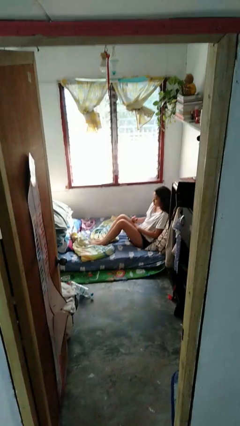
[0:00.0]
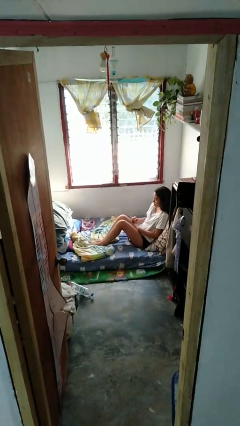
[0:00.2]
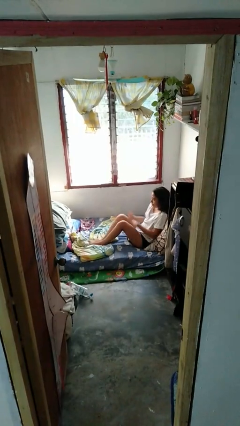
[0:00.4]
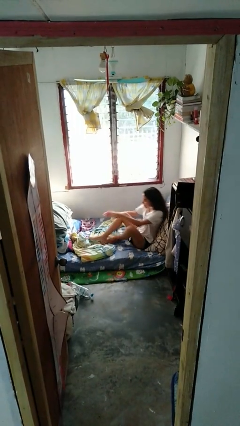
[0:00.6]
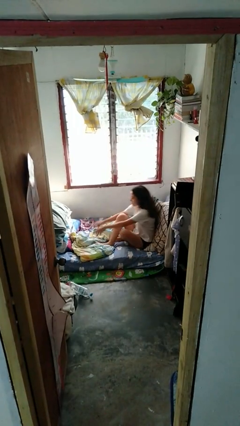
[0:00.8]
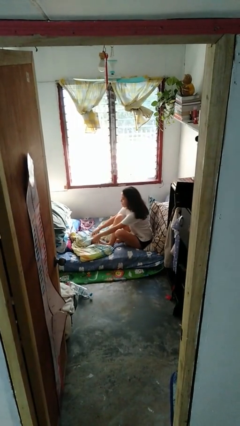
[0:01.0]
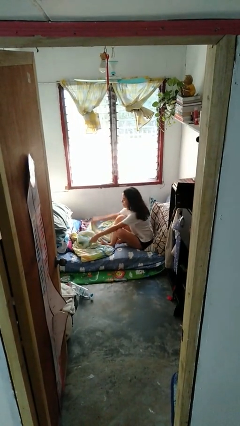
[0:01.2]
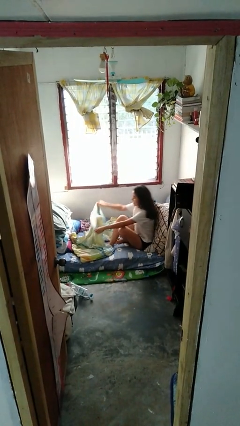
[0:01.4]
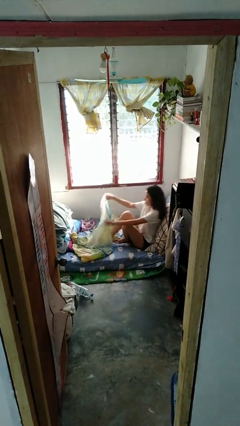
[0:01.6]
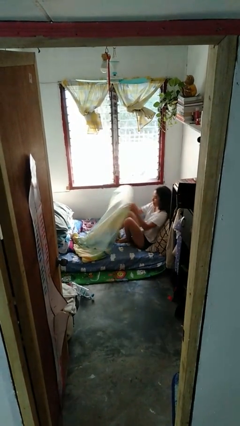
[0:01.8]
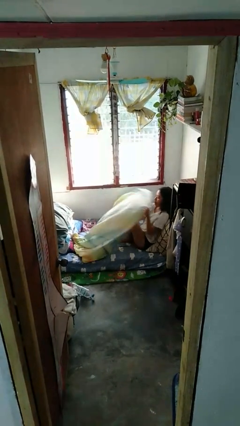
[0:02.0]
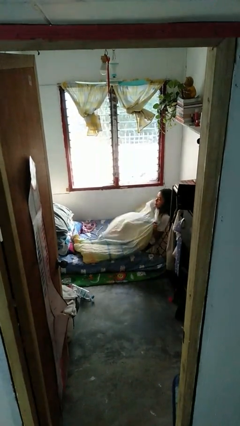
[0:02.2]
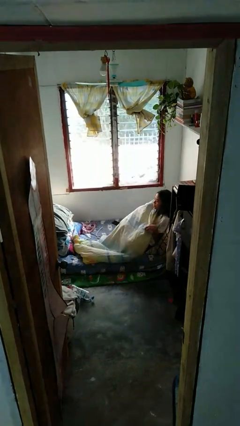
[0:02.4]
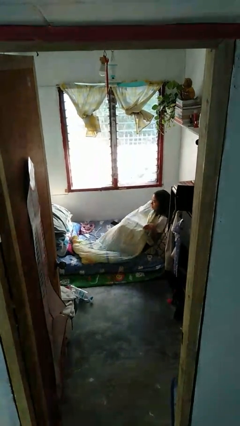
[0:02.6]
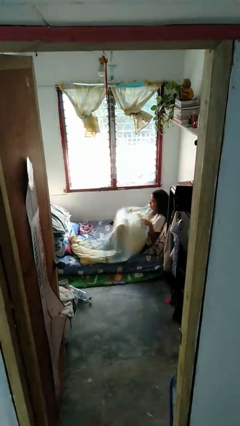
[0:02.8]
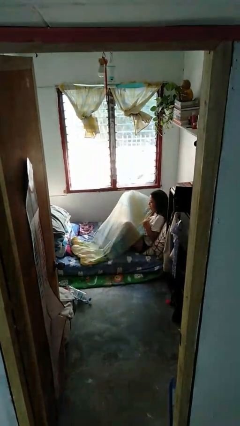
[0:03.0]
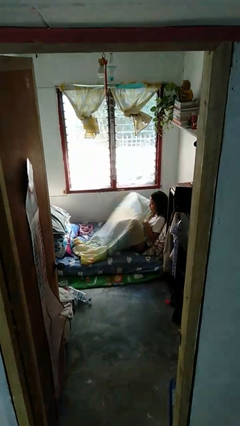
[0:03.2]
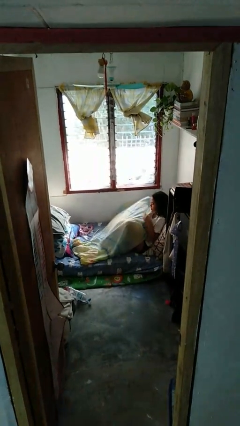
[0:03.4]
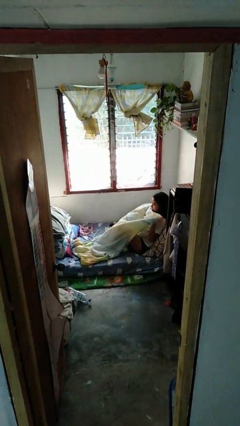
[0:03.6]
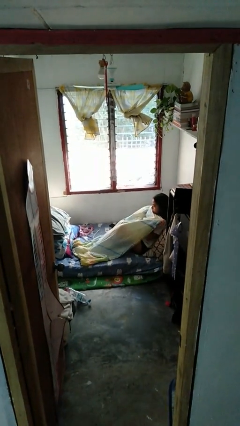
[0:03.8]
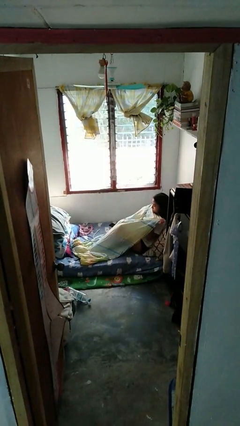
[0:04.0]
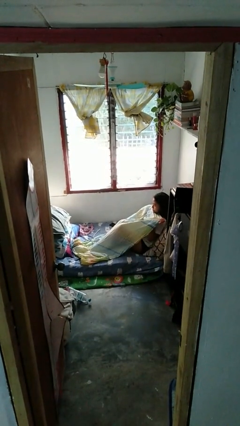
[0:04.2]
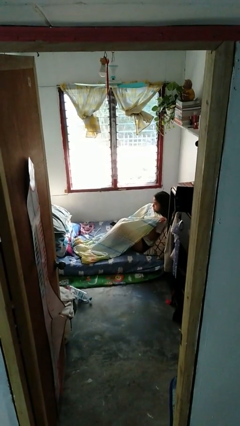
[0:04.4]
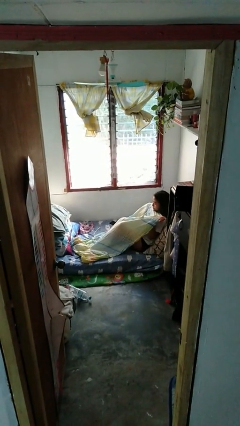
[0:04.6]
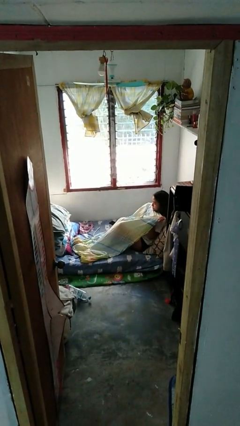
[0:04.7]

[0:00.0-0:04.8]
person covers with bedsheets

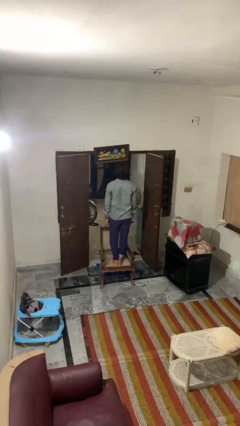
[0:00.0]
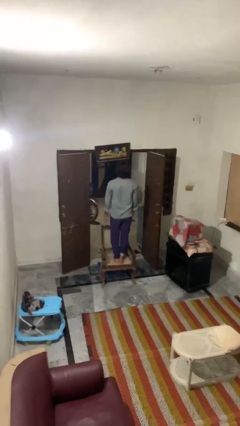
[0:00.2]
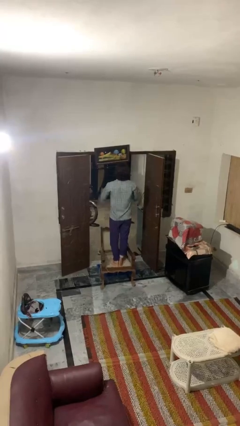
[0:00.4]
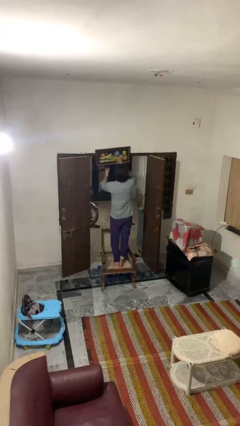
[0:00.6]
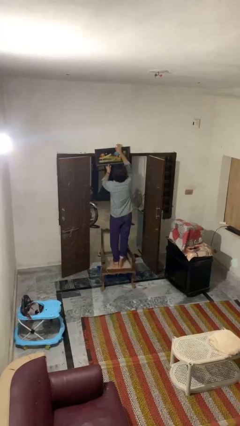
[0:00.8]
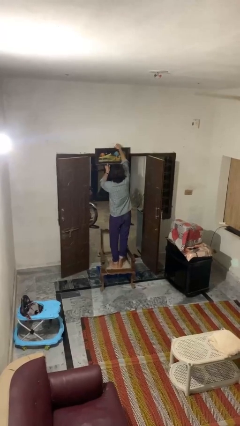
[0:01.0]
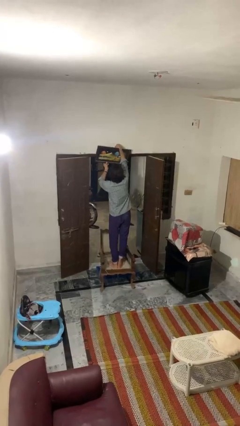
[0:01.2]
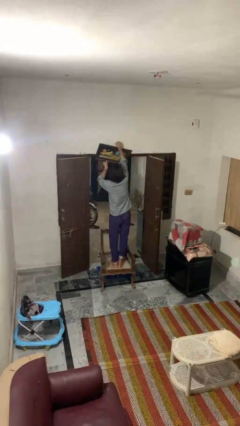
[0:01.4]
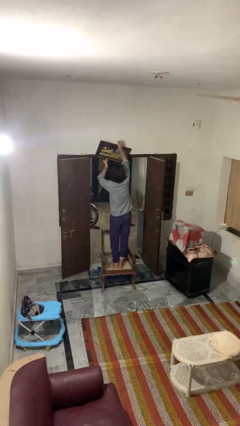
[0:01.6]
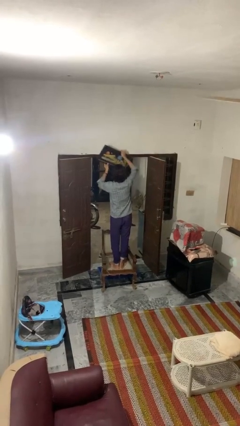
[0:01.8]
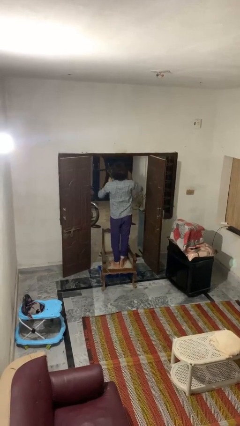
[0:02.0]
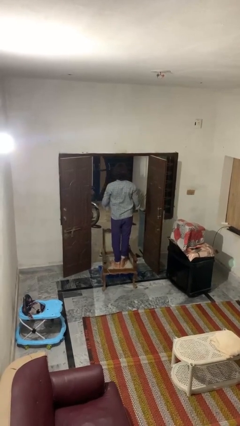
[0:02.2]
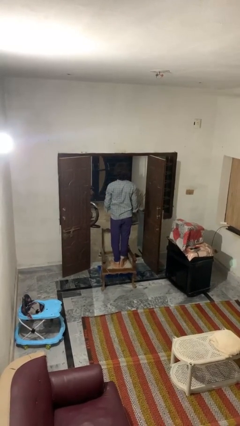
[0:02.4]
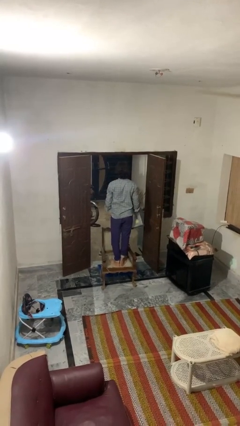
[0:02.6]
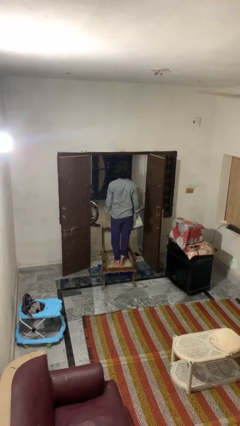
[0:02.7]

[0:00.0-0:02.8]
person takes down picture frame

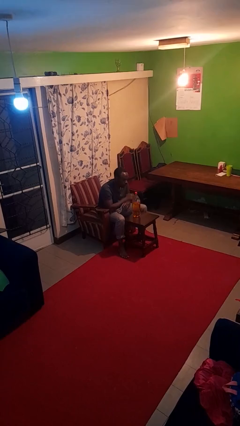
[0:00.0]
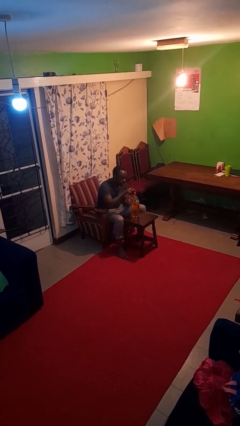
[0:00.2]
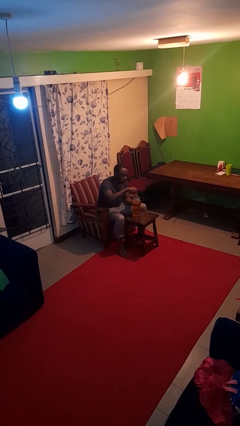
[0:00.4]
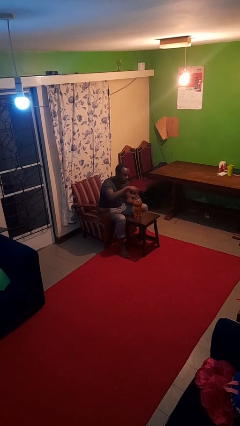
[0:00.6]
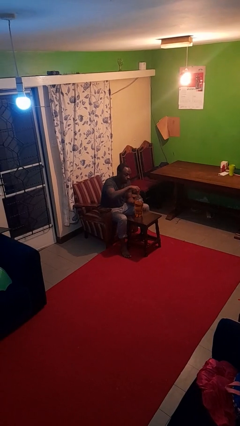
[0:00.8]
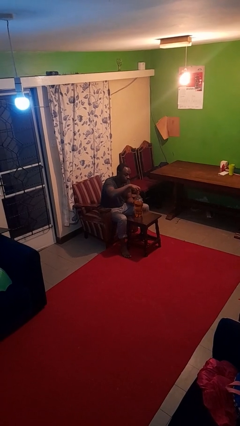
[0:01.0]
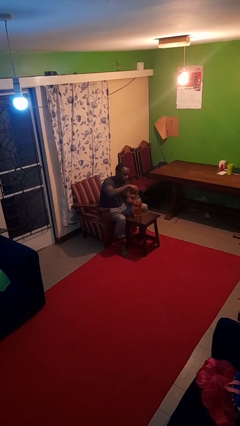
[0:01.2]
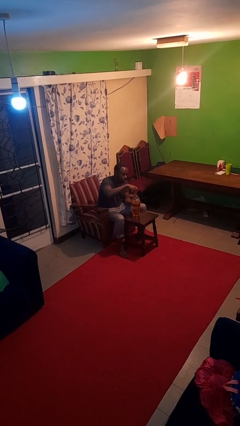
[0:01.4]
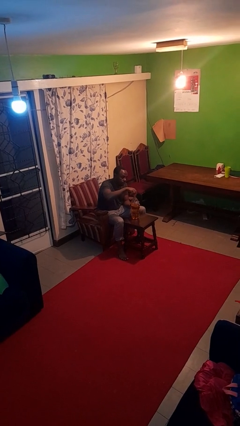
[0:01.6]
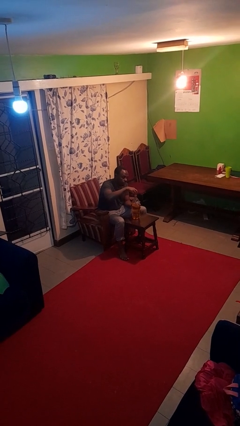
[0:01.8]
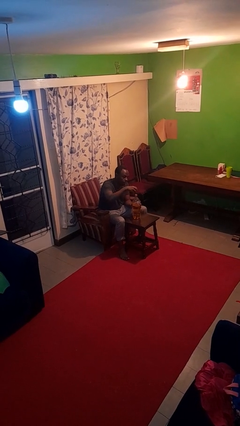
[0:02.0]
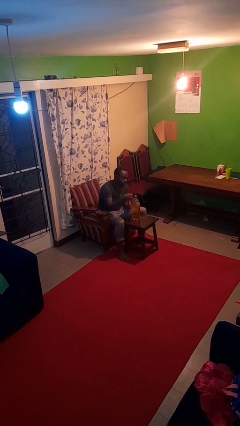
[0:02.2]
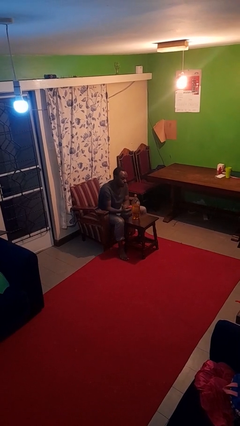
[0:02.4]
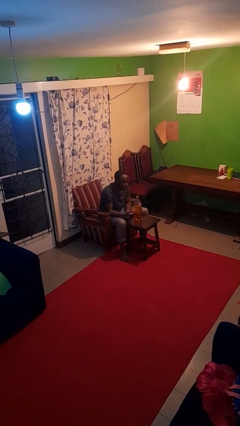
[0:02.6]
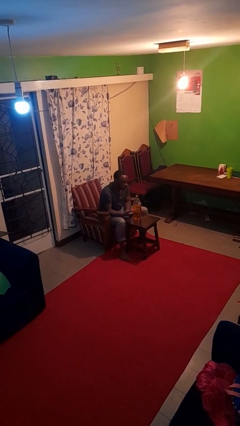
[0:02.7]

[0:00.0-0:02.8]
person unscrews lid from bottle

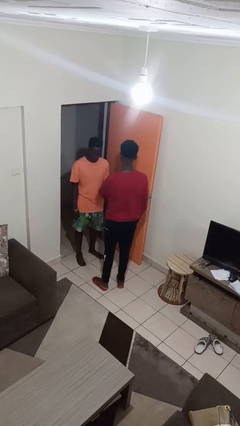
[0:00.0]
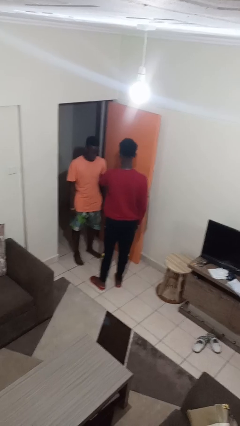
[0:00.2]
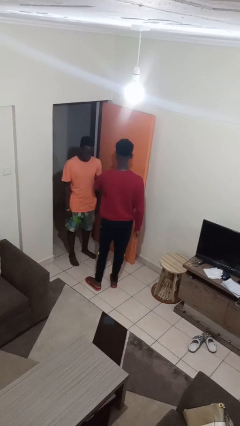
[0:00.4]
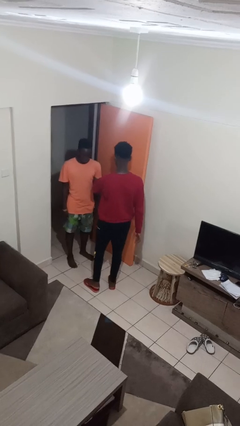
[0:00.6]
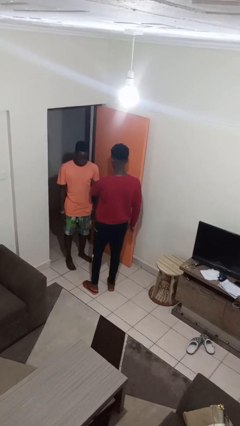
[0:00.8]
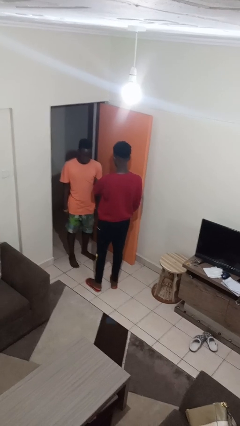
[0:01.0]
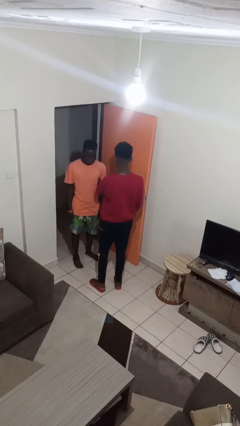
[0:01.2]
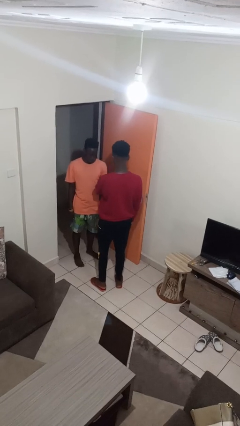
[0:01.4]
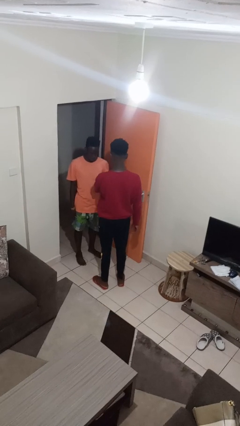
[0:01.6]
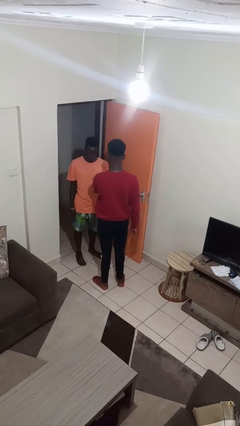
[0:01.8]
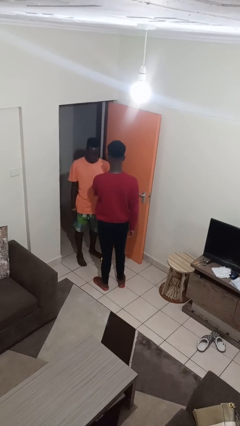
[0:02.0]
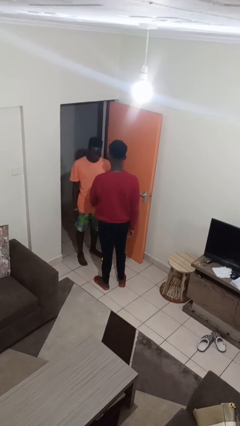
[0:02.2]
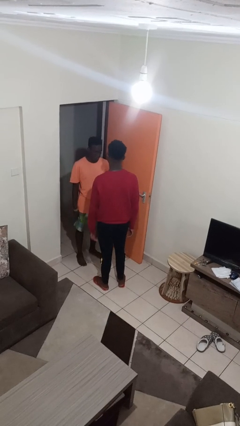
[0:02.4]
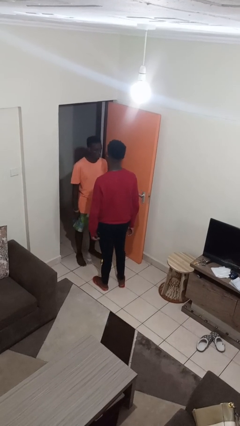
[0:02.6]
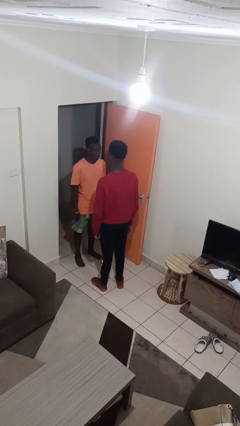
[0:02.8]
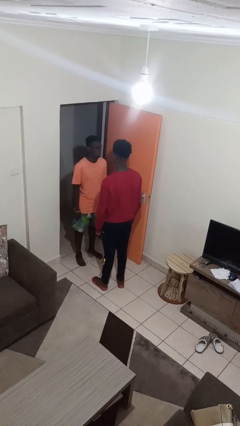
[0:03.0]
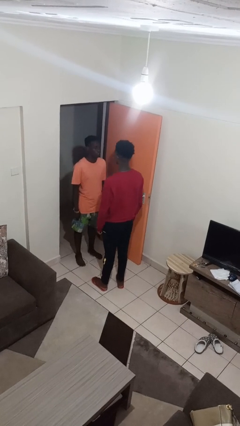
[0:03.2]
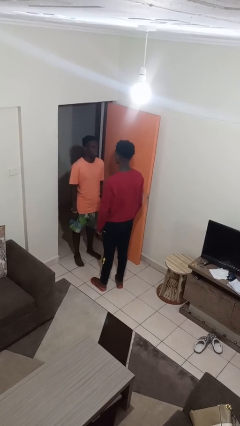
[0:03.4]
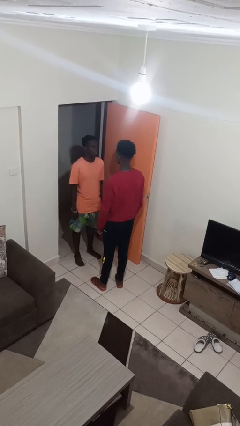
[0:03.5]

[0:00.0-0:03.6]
person grabs person by bicep

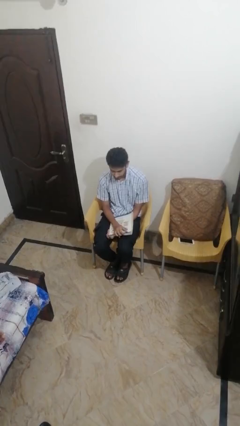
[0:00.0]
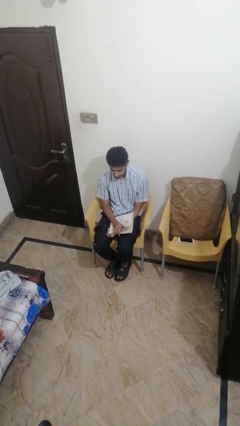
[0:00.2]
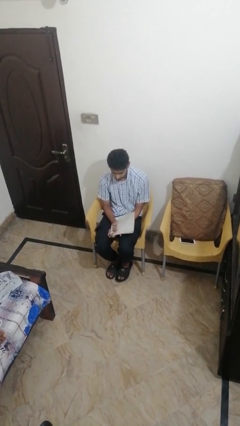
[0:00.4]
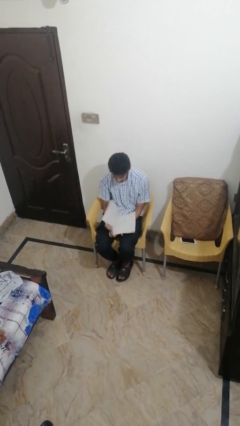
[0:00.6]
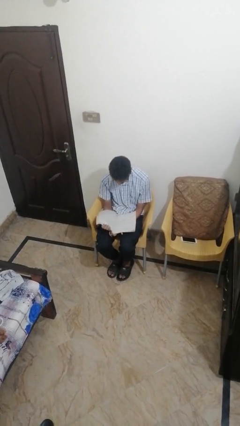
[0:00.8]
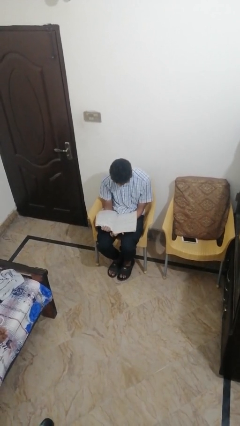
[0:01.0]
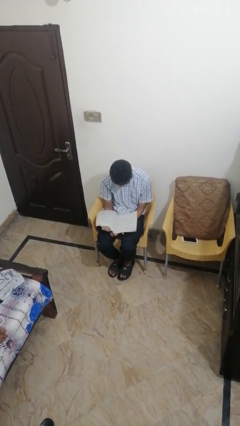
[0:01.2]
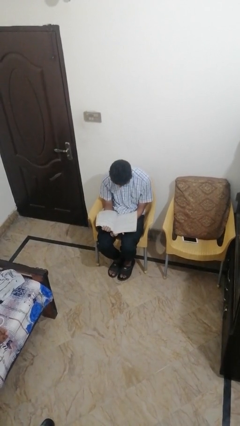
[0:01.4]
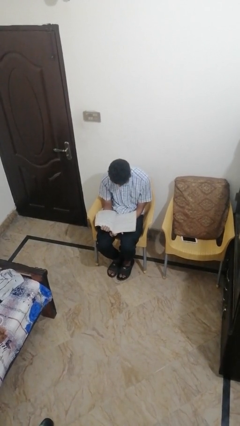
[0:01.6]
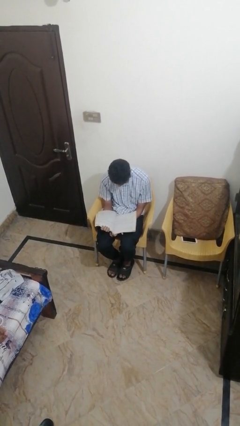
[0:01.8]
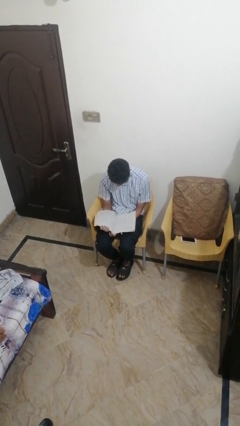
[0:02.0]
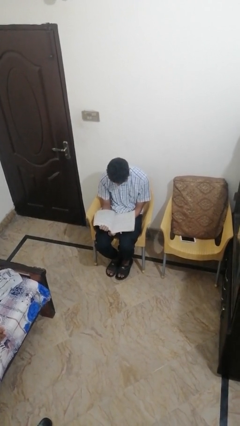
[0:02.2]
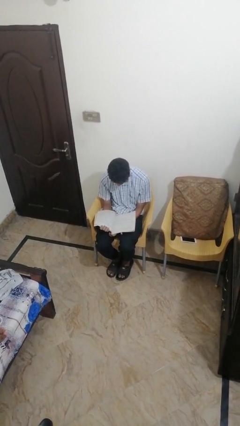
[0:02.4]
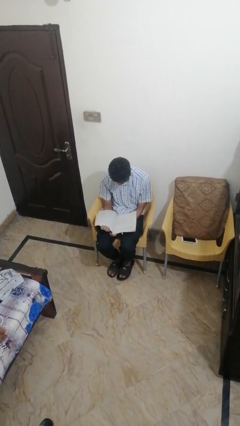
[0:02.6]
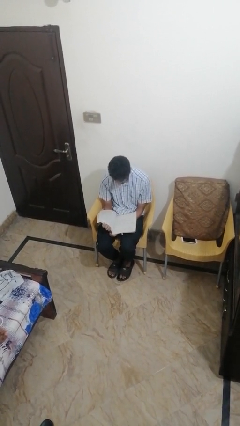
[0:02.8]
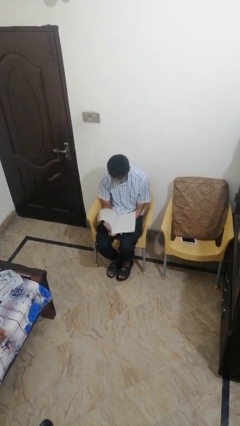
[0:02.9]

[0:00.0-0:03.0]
person reads magazine

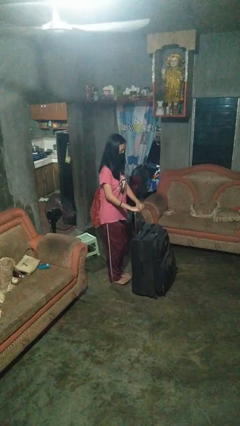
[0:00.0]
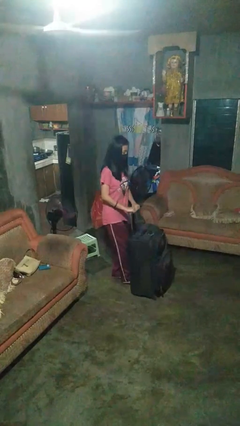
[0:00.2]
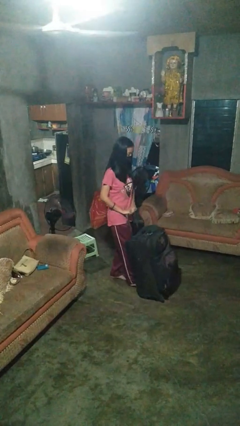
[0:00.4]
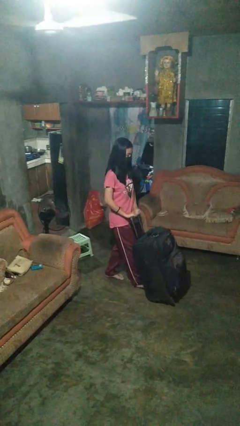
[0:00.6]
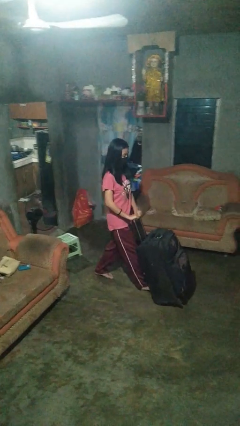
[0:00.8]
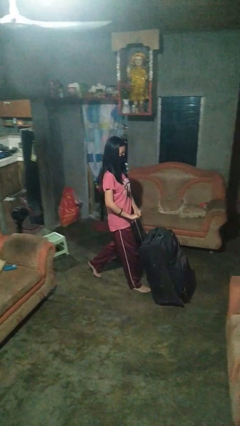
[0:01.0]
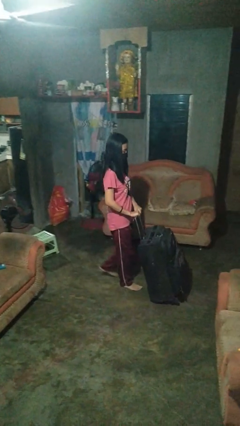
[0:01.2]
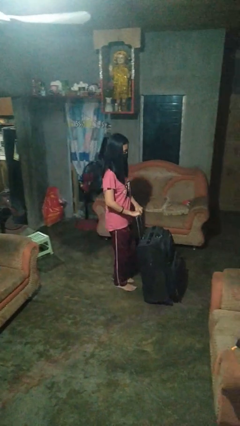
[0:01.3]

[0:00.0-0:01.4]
person pushes wheeled cart
